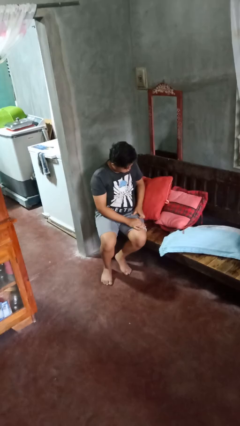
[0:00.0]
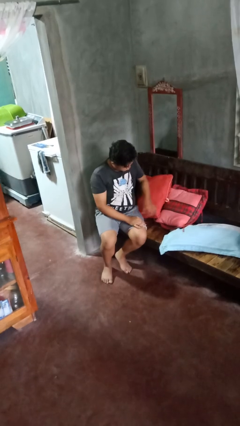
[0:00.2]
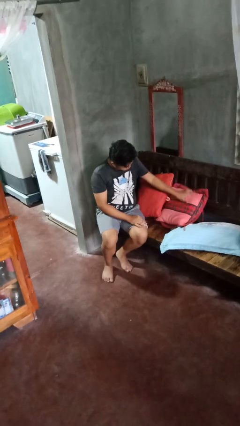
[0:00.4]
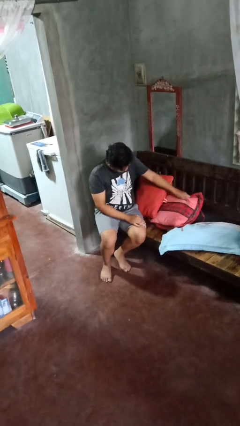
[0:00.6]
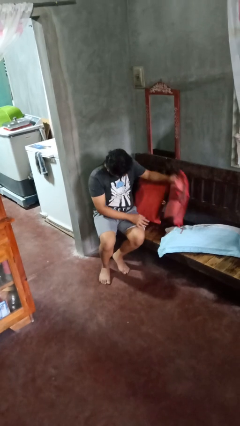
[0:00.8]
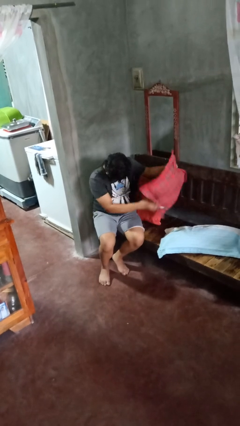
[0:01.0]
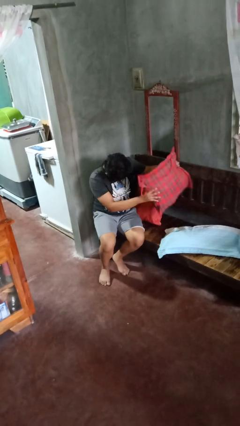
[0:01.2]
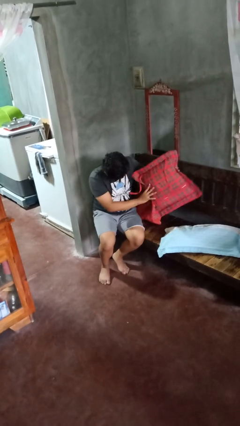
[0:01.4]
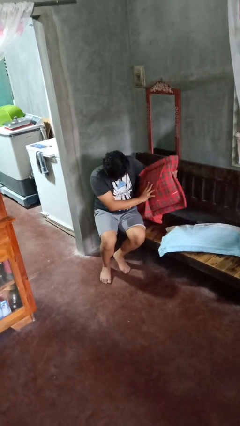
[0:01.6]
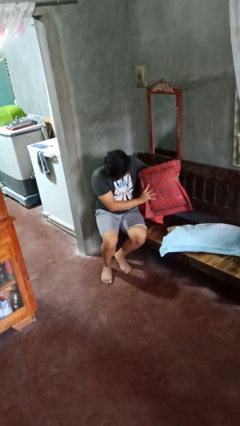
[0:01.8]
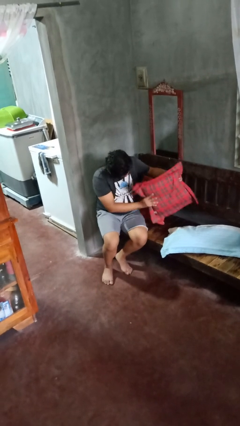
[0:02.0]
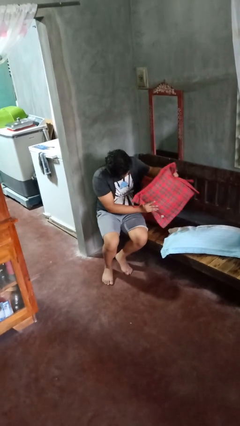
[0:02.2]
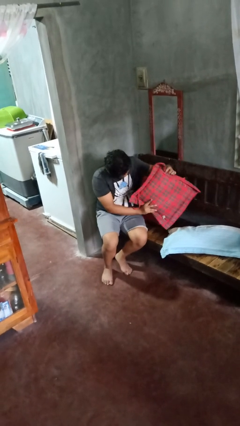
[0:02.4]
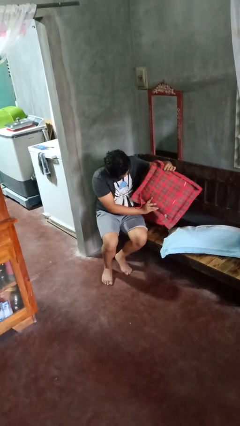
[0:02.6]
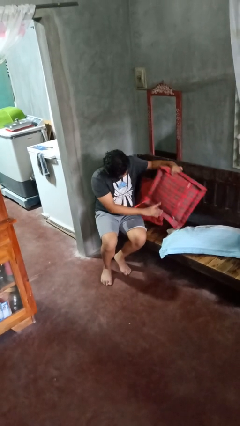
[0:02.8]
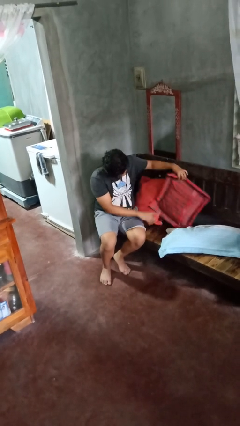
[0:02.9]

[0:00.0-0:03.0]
person searches in couch

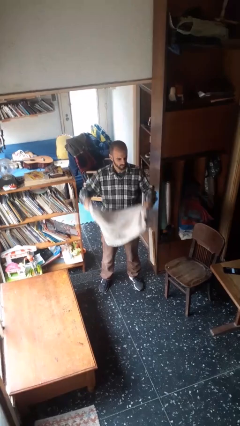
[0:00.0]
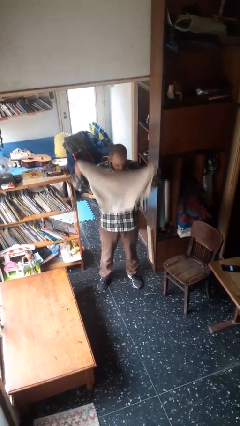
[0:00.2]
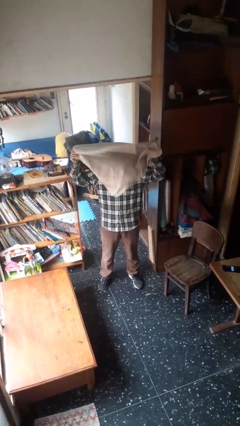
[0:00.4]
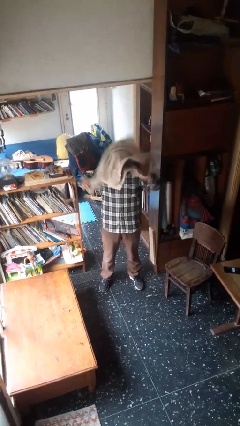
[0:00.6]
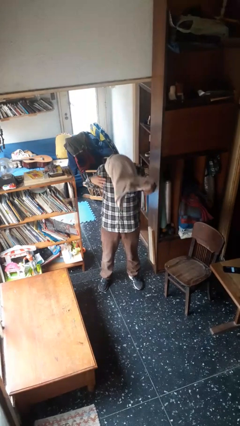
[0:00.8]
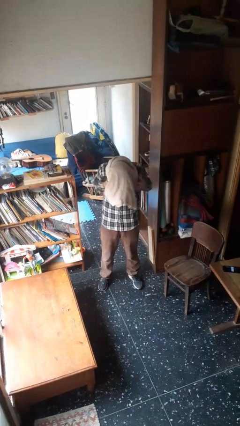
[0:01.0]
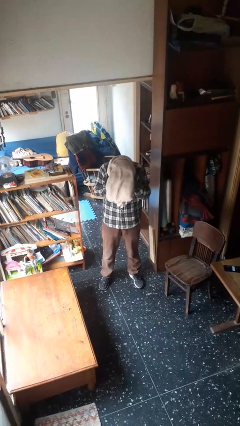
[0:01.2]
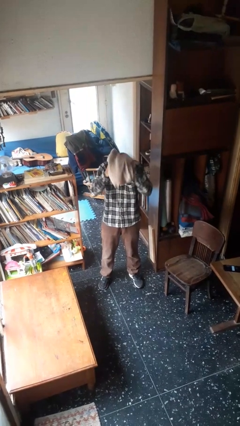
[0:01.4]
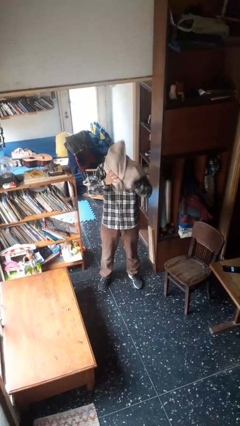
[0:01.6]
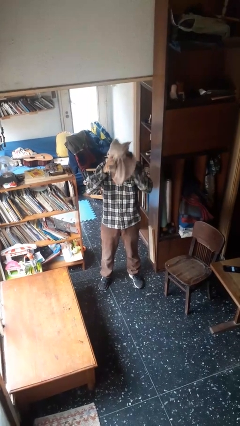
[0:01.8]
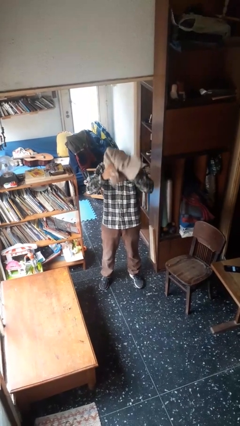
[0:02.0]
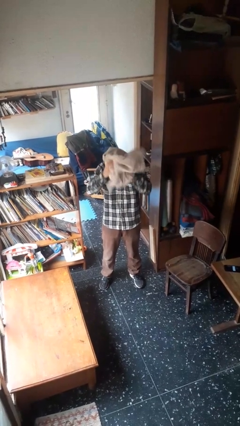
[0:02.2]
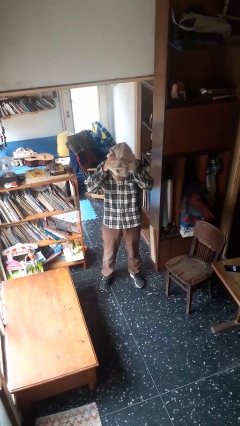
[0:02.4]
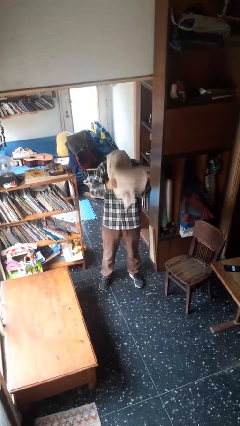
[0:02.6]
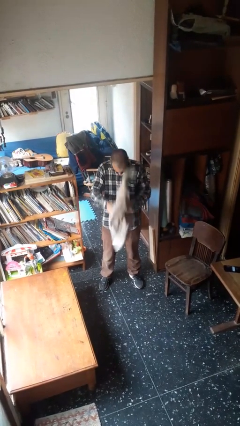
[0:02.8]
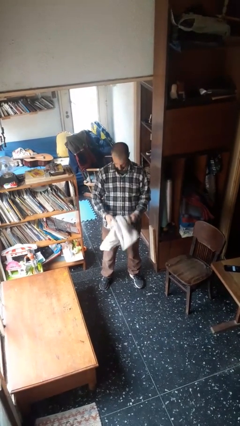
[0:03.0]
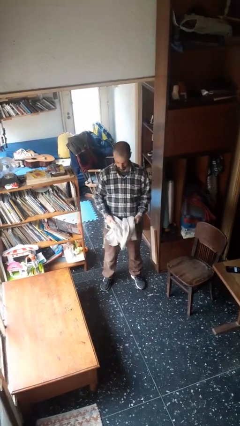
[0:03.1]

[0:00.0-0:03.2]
person dries hair with towel

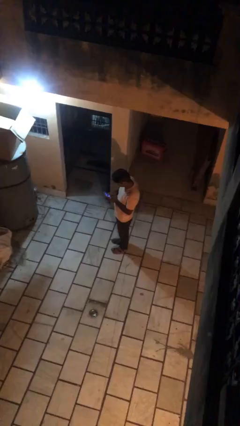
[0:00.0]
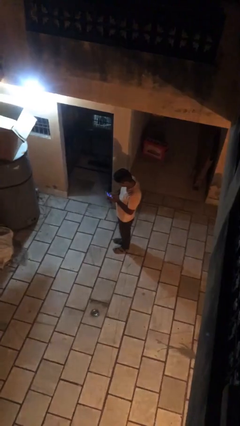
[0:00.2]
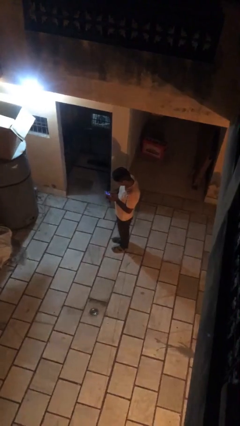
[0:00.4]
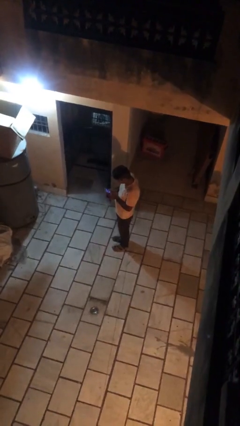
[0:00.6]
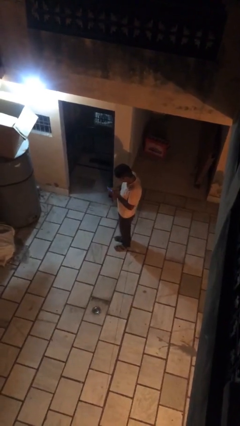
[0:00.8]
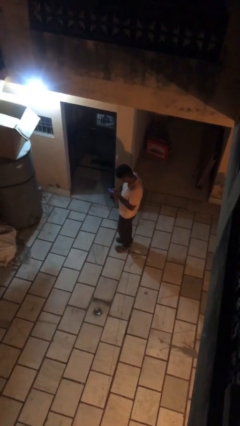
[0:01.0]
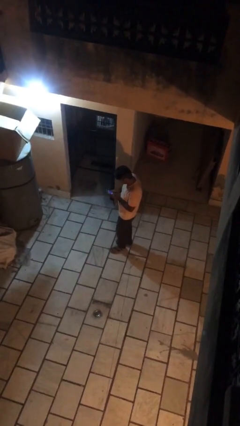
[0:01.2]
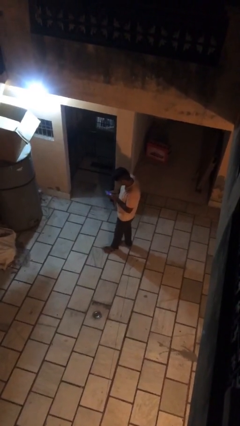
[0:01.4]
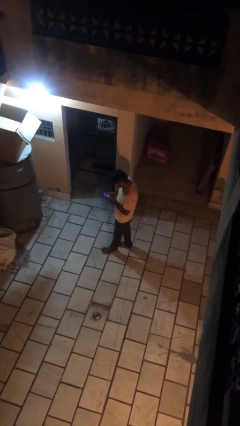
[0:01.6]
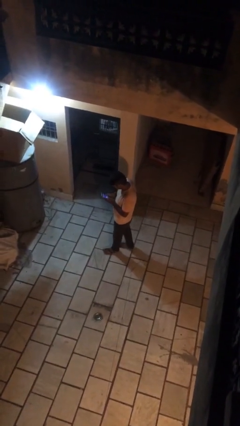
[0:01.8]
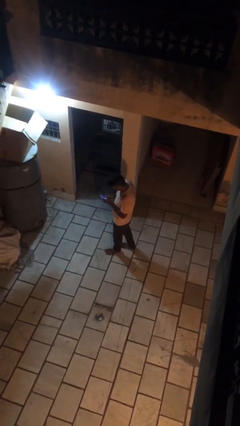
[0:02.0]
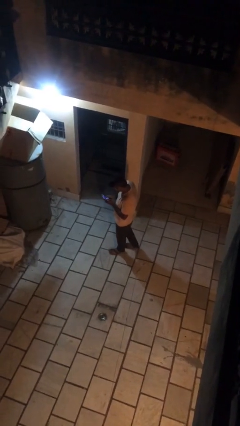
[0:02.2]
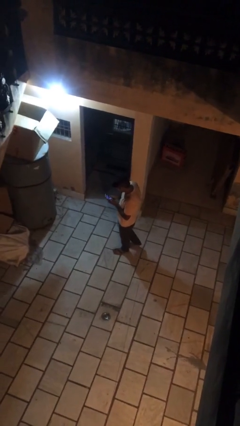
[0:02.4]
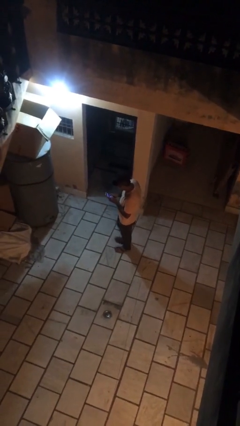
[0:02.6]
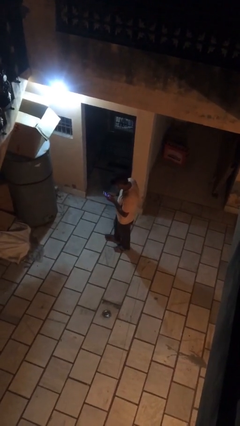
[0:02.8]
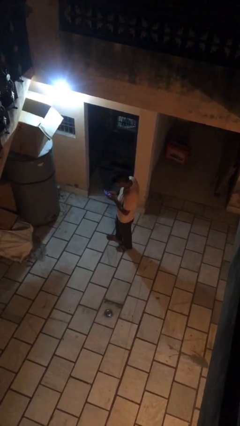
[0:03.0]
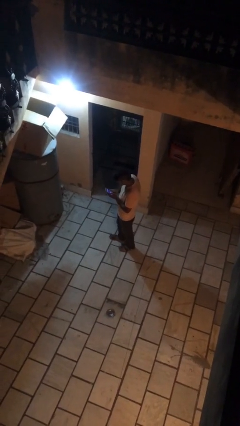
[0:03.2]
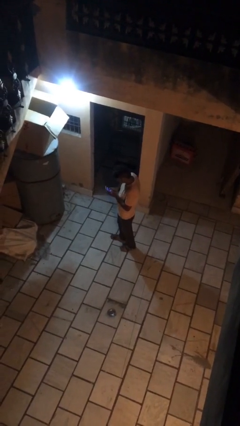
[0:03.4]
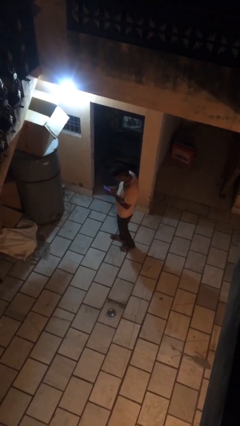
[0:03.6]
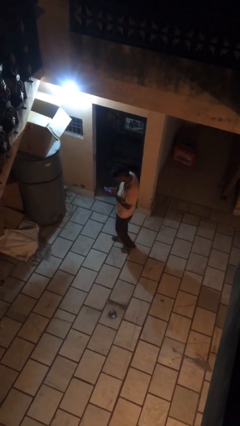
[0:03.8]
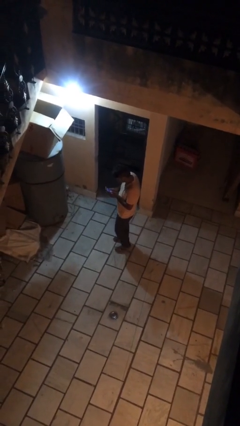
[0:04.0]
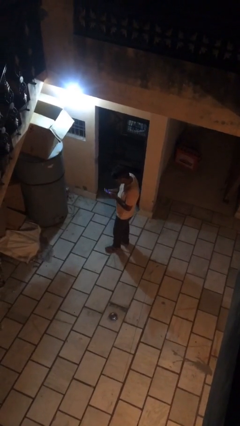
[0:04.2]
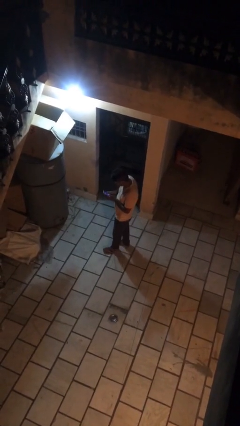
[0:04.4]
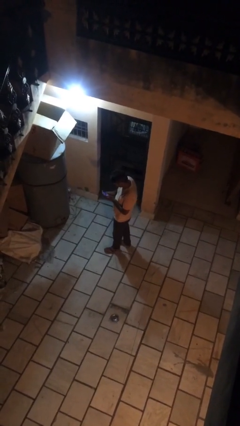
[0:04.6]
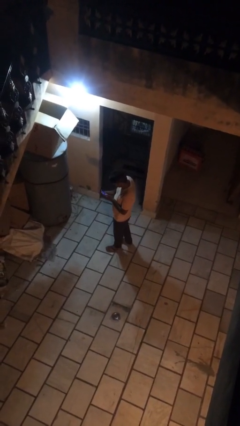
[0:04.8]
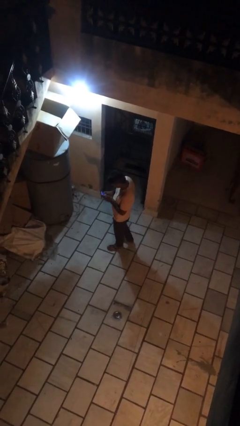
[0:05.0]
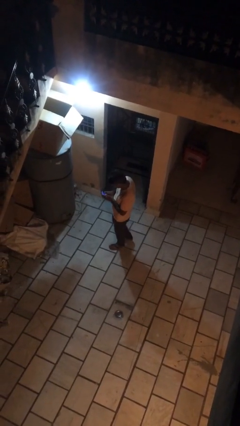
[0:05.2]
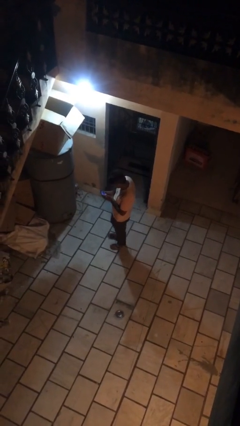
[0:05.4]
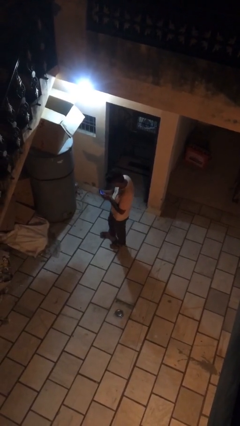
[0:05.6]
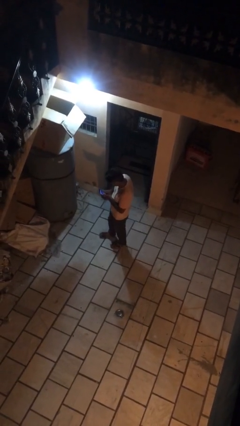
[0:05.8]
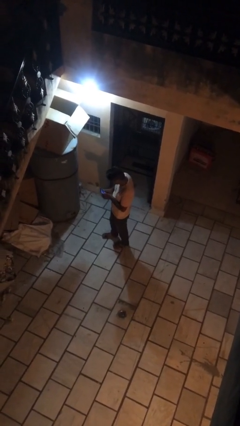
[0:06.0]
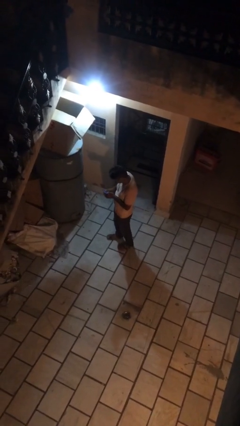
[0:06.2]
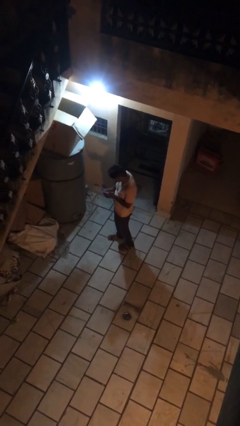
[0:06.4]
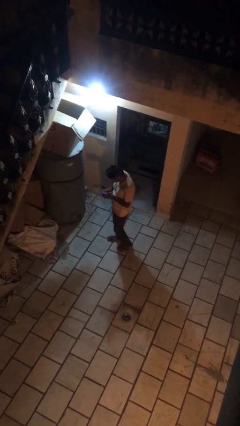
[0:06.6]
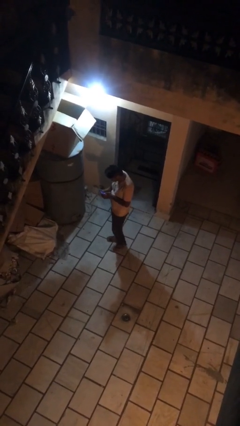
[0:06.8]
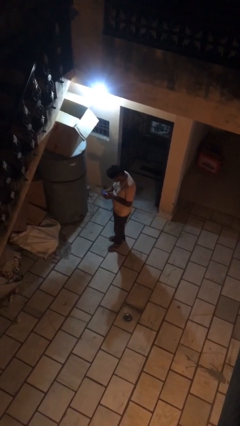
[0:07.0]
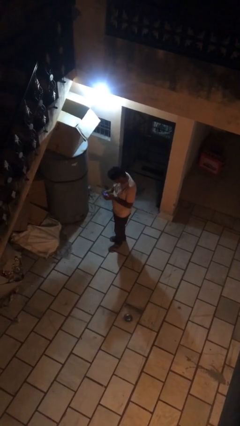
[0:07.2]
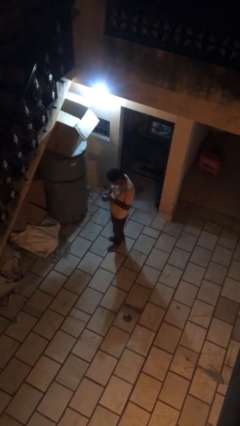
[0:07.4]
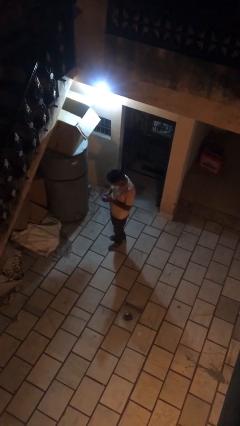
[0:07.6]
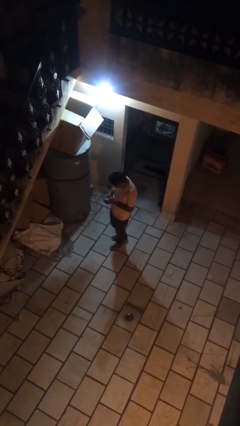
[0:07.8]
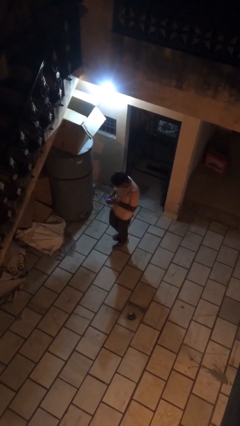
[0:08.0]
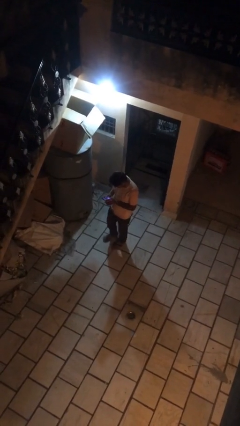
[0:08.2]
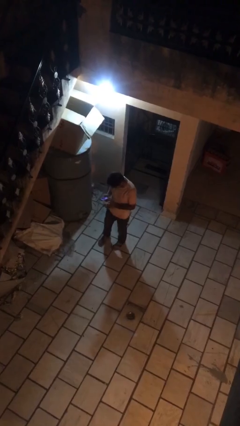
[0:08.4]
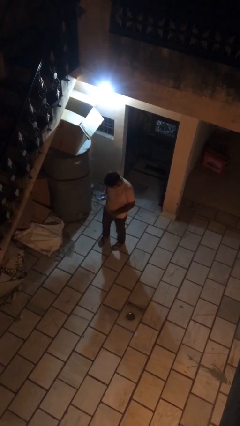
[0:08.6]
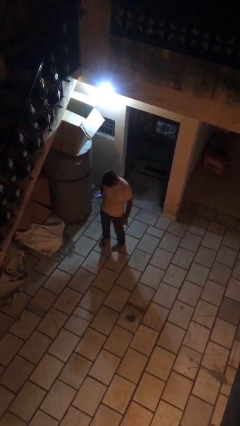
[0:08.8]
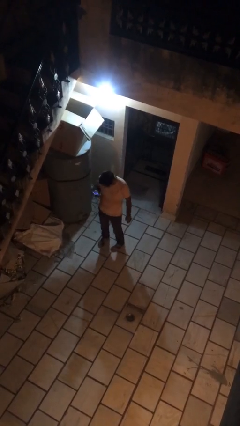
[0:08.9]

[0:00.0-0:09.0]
person texts on phone

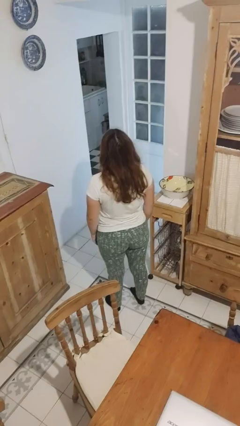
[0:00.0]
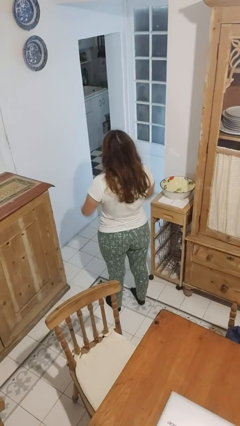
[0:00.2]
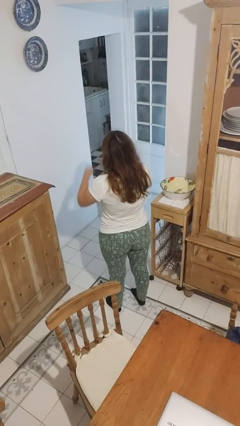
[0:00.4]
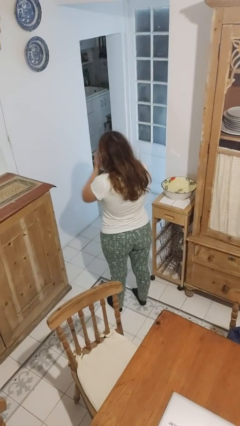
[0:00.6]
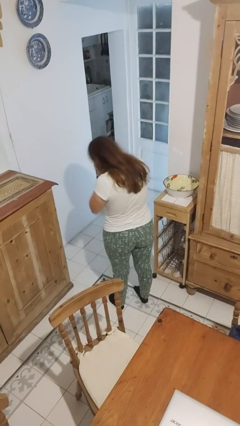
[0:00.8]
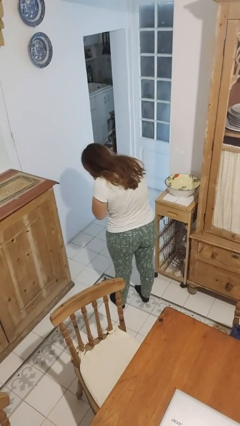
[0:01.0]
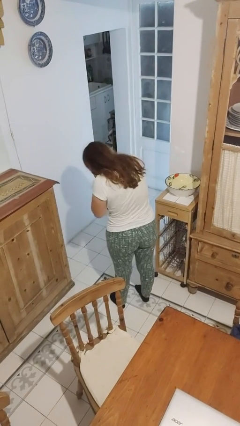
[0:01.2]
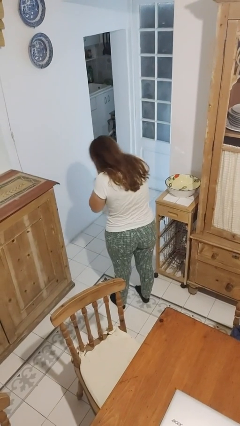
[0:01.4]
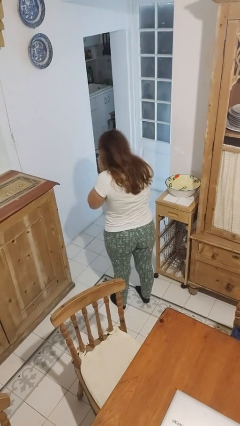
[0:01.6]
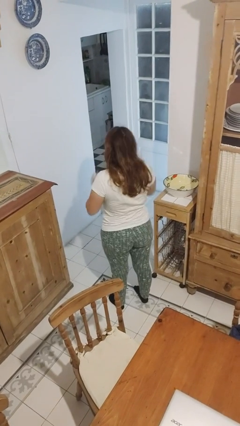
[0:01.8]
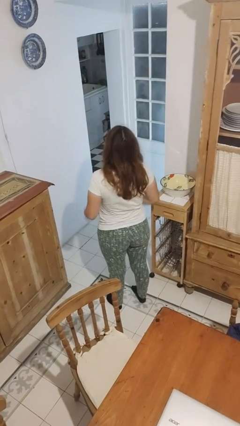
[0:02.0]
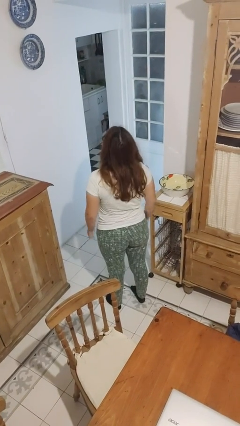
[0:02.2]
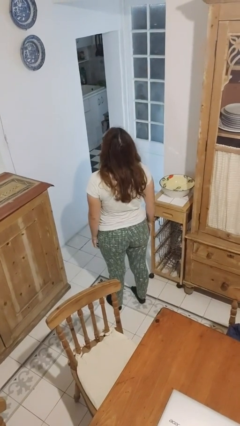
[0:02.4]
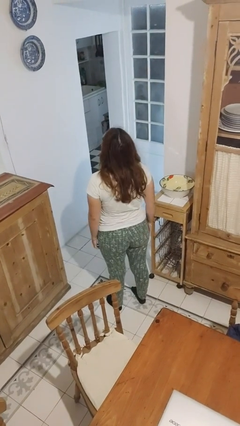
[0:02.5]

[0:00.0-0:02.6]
person sneezes into hand
